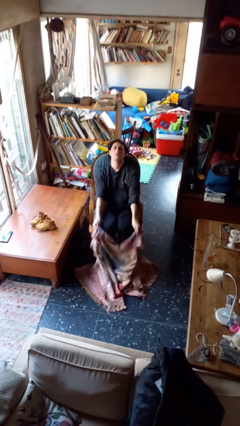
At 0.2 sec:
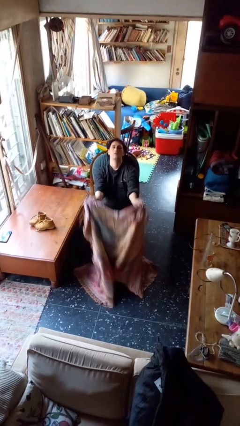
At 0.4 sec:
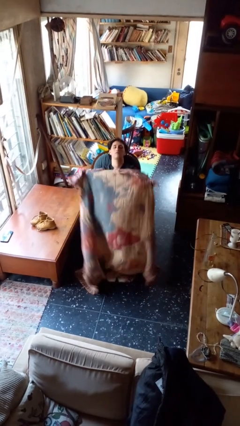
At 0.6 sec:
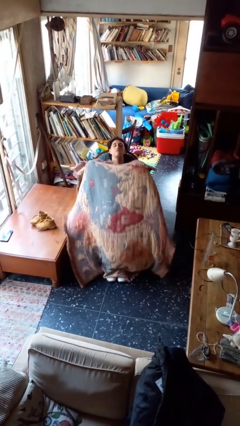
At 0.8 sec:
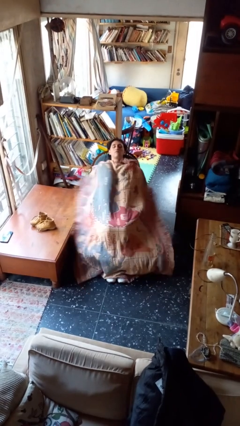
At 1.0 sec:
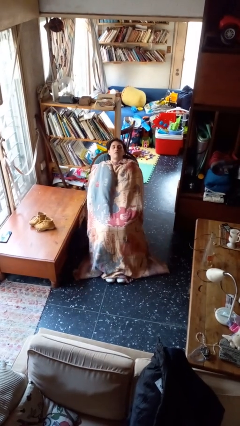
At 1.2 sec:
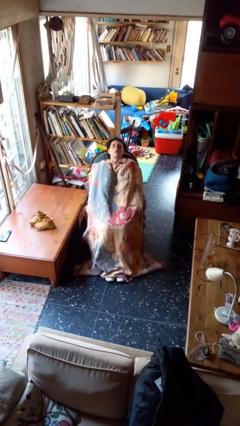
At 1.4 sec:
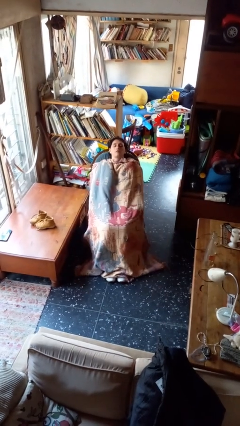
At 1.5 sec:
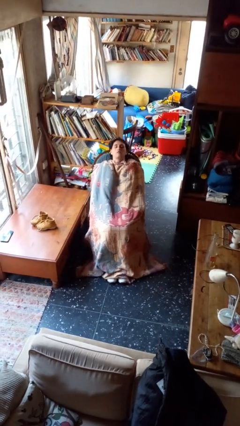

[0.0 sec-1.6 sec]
person covers with blanket

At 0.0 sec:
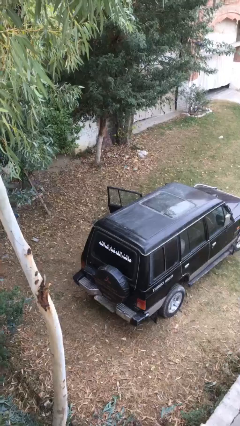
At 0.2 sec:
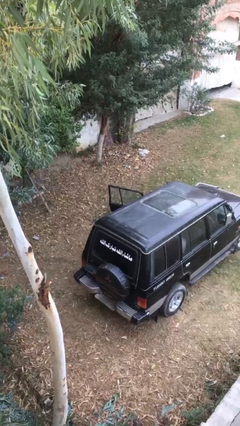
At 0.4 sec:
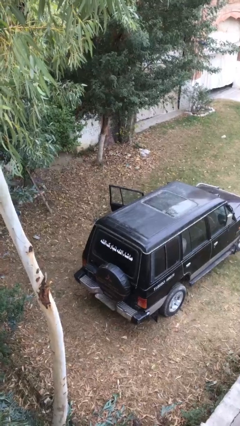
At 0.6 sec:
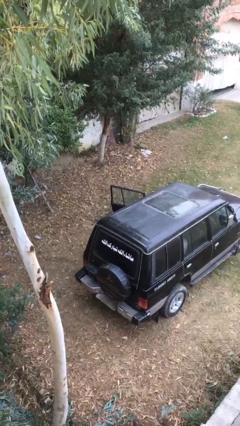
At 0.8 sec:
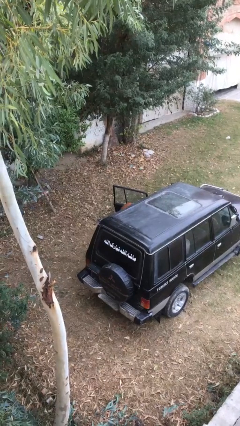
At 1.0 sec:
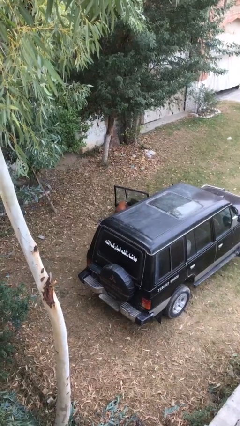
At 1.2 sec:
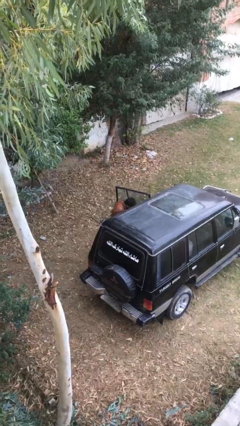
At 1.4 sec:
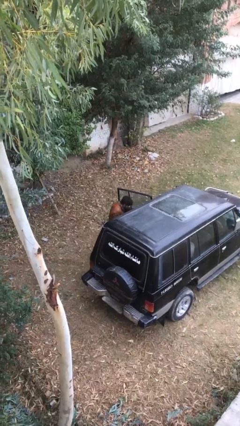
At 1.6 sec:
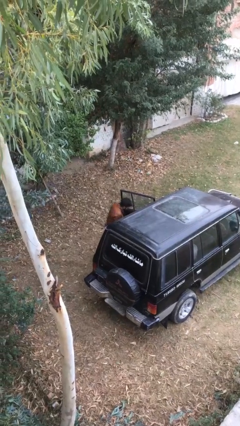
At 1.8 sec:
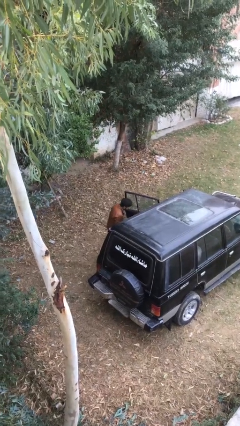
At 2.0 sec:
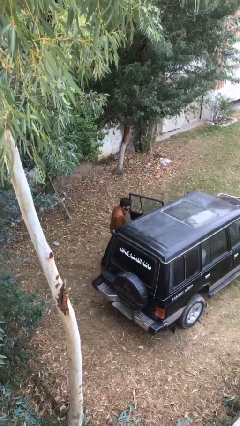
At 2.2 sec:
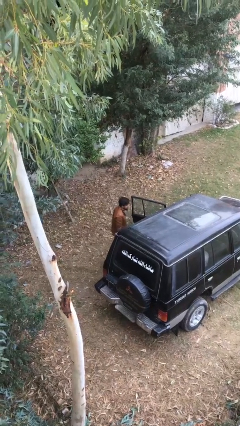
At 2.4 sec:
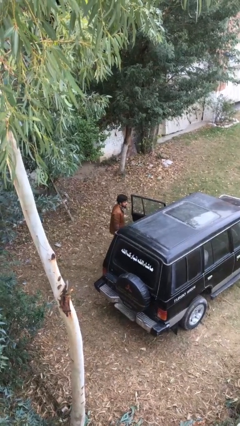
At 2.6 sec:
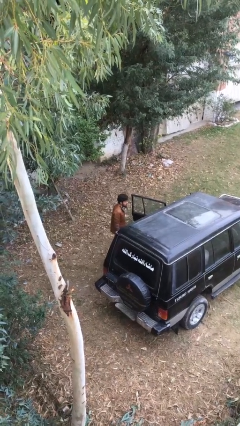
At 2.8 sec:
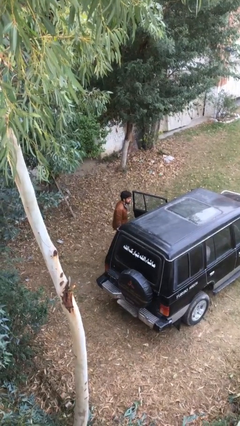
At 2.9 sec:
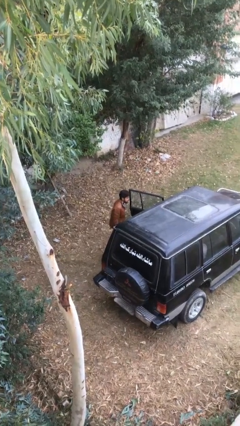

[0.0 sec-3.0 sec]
person exits car

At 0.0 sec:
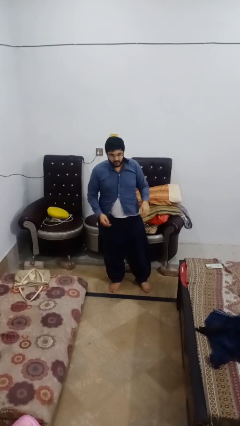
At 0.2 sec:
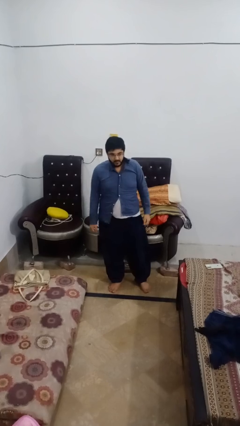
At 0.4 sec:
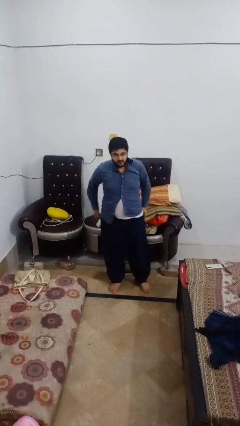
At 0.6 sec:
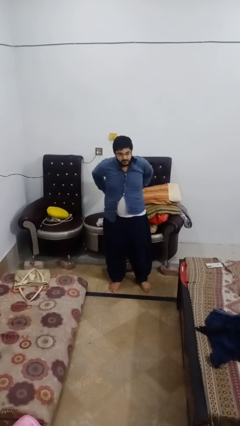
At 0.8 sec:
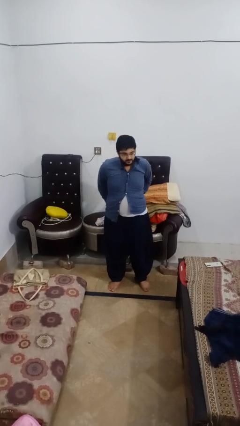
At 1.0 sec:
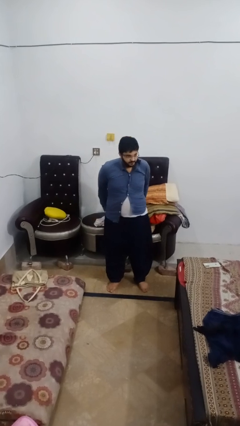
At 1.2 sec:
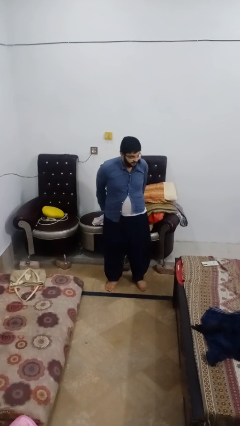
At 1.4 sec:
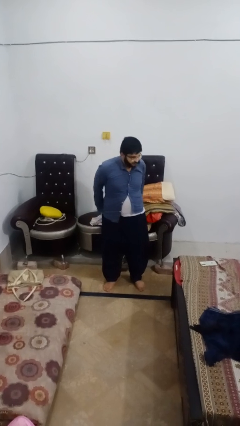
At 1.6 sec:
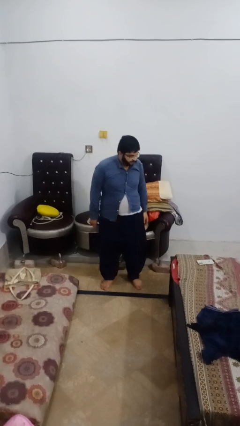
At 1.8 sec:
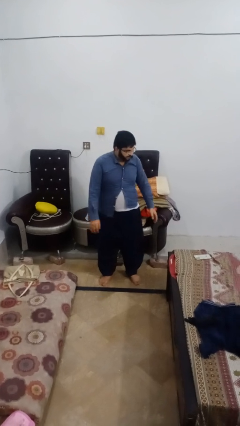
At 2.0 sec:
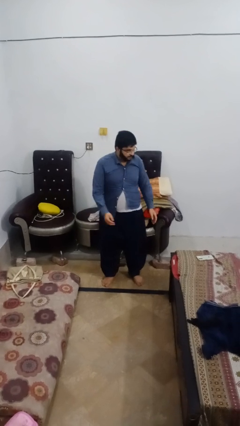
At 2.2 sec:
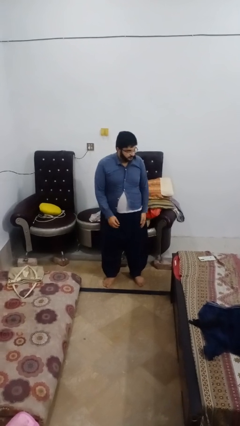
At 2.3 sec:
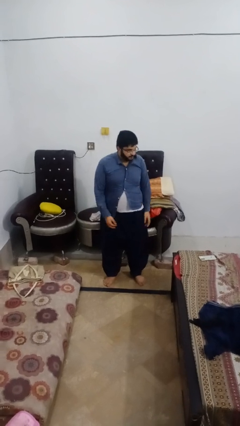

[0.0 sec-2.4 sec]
person puts hands in back pockets

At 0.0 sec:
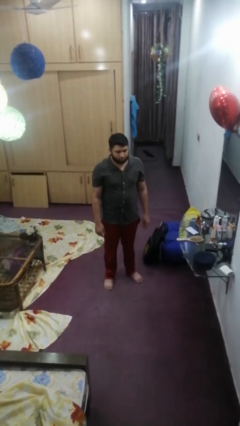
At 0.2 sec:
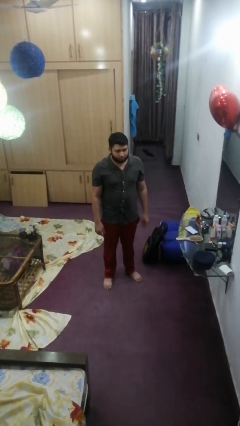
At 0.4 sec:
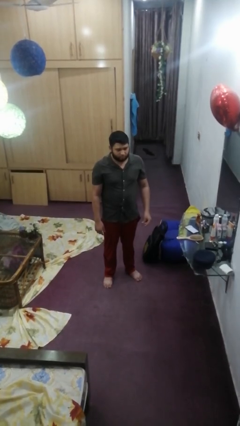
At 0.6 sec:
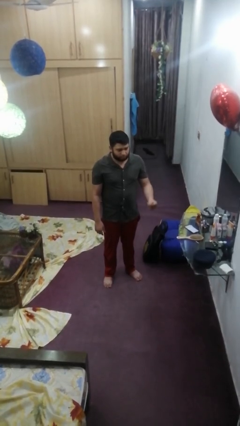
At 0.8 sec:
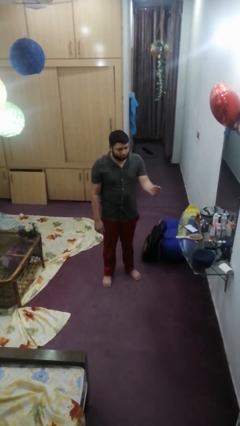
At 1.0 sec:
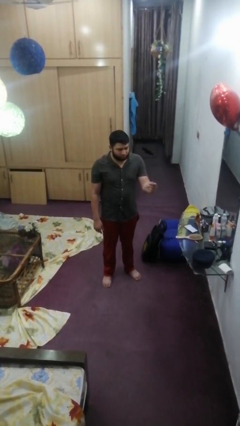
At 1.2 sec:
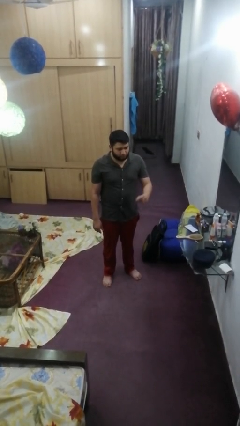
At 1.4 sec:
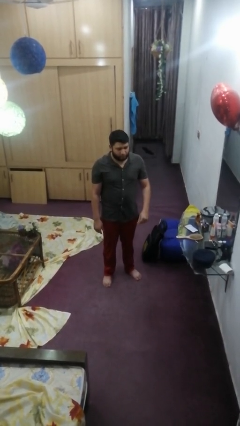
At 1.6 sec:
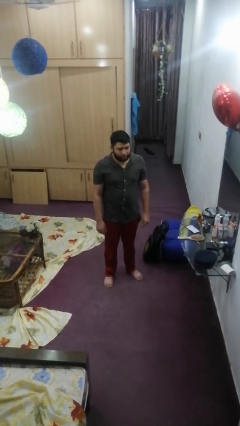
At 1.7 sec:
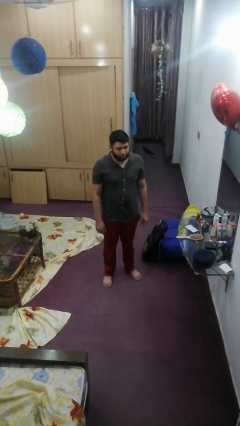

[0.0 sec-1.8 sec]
person snaps fingers

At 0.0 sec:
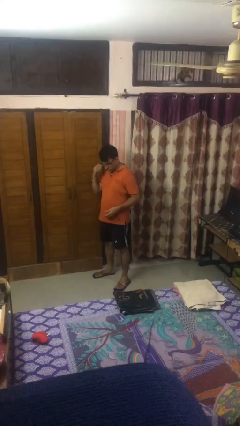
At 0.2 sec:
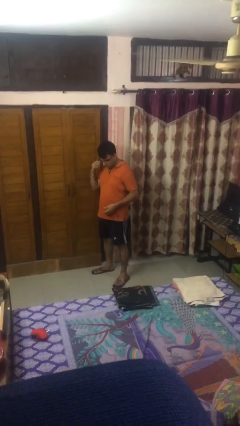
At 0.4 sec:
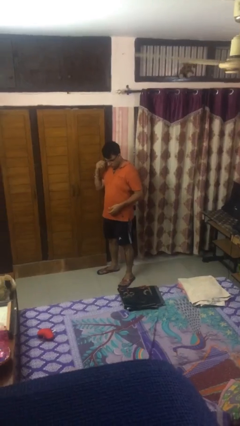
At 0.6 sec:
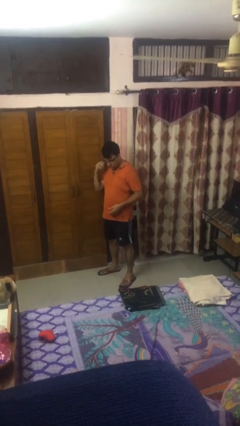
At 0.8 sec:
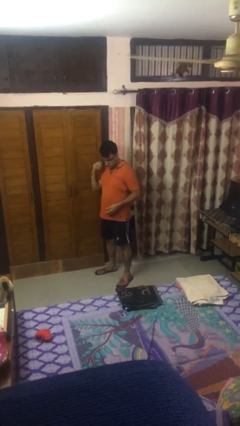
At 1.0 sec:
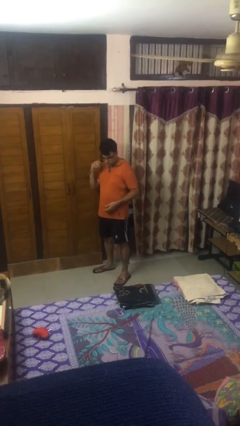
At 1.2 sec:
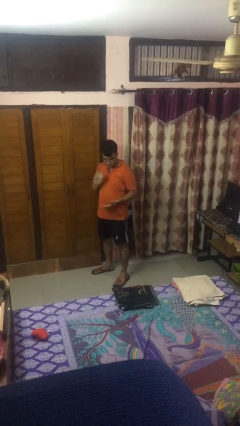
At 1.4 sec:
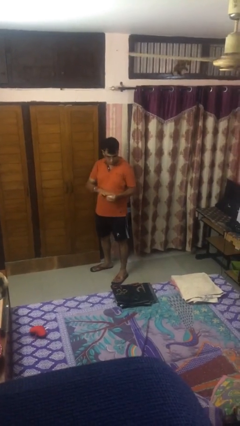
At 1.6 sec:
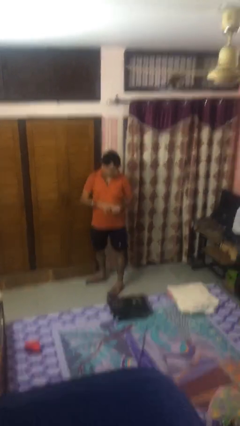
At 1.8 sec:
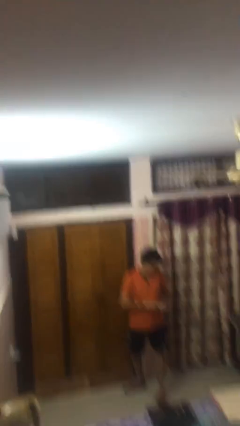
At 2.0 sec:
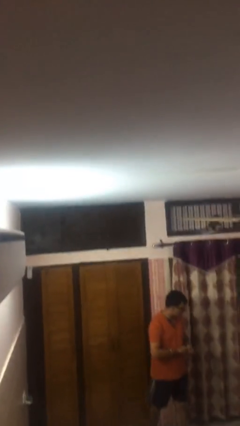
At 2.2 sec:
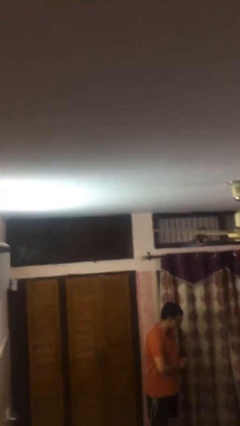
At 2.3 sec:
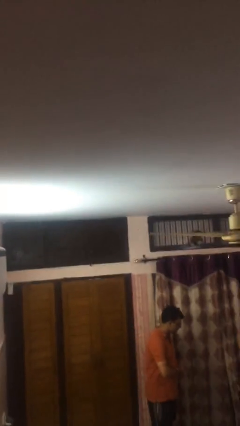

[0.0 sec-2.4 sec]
person bounces ball on floor

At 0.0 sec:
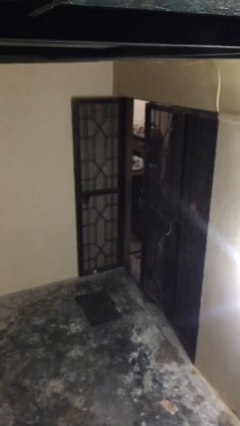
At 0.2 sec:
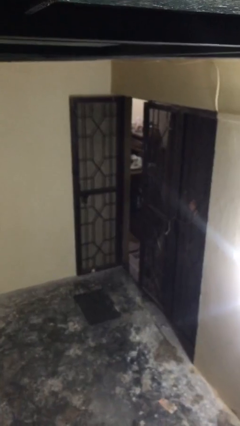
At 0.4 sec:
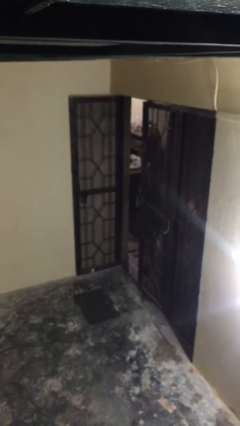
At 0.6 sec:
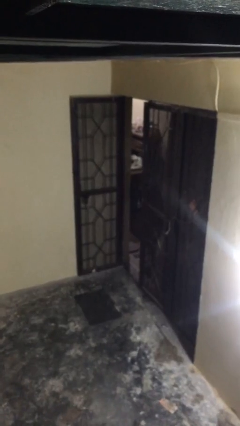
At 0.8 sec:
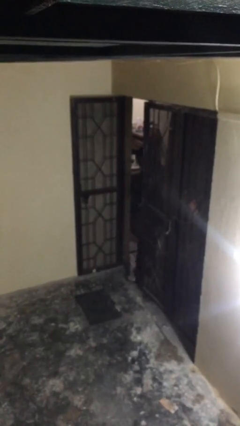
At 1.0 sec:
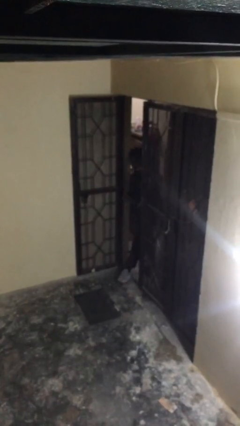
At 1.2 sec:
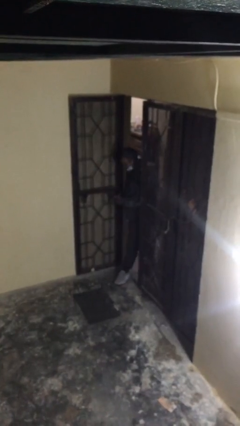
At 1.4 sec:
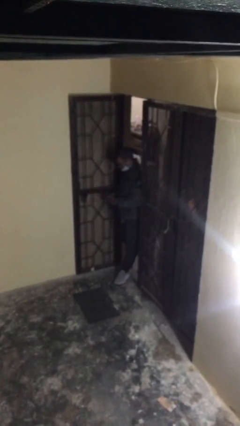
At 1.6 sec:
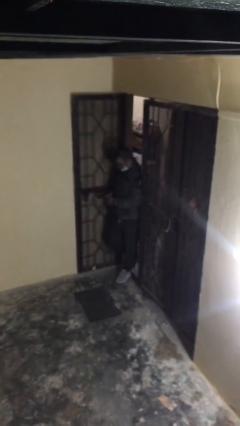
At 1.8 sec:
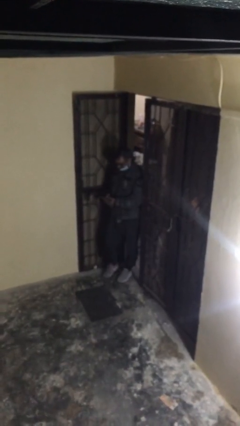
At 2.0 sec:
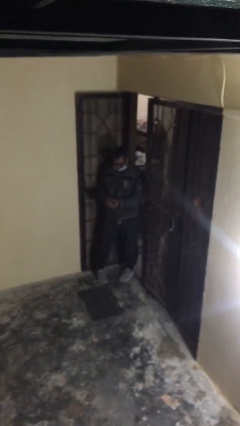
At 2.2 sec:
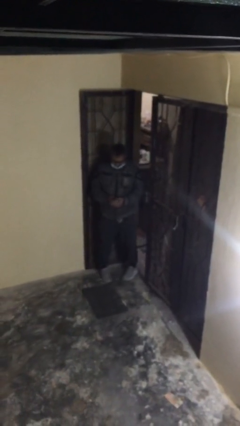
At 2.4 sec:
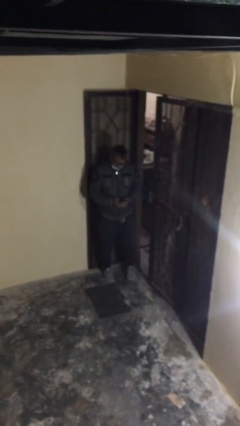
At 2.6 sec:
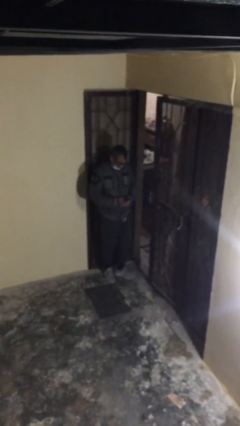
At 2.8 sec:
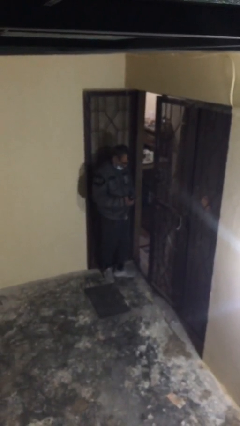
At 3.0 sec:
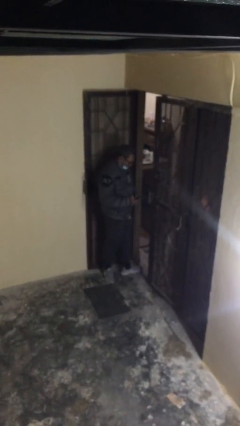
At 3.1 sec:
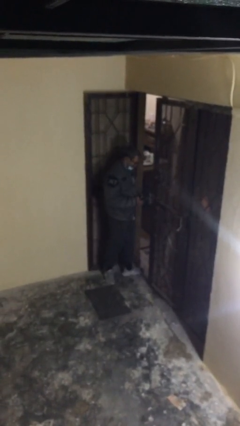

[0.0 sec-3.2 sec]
person enters scene through structure

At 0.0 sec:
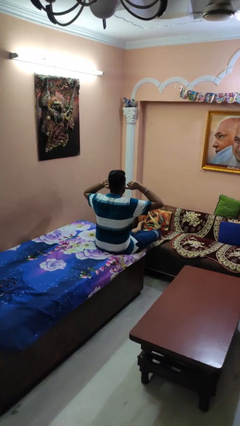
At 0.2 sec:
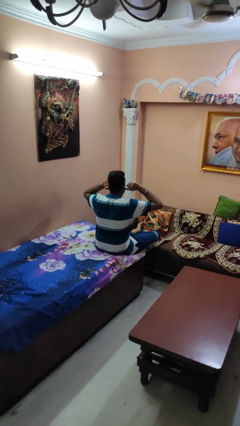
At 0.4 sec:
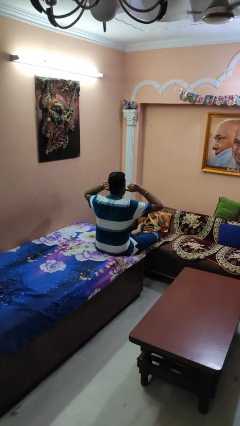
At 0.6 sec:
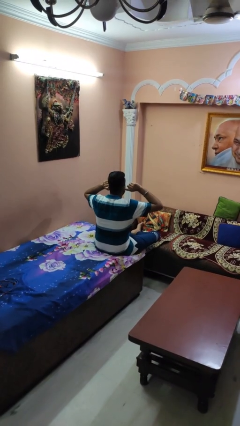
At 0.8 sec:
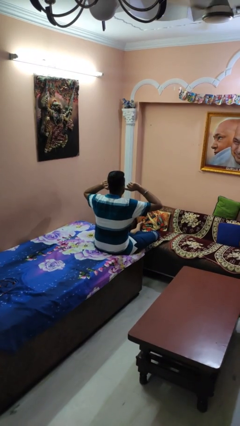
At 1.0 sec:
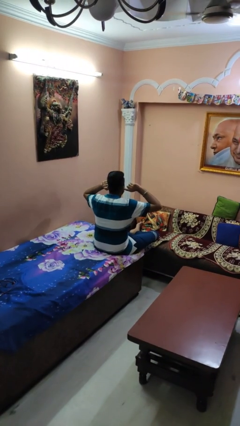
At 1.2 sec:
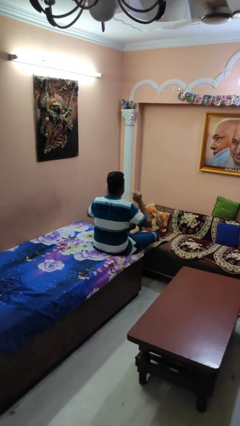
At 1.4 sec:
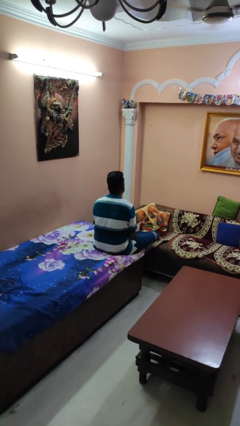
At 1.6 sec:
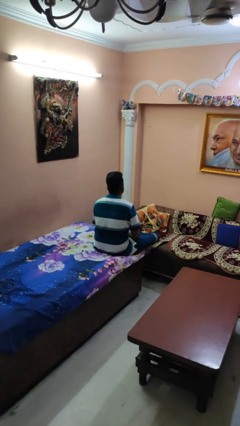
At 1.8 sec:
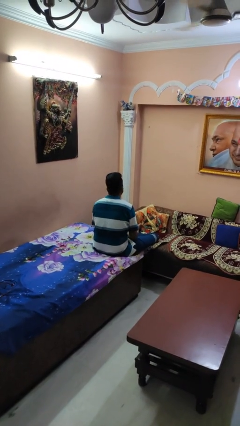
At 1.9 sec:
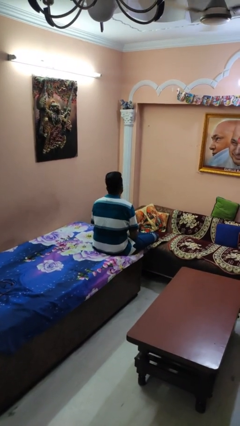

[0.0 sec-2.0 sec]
person puts fingers in ear
